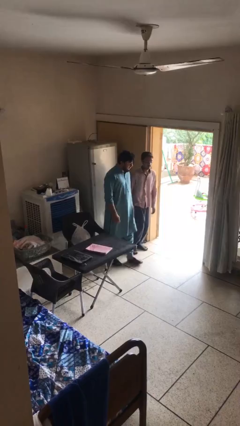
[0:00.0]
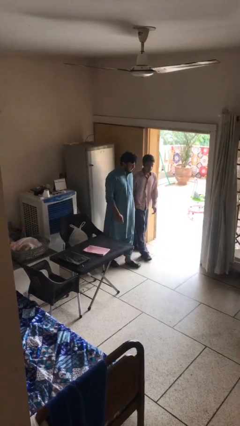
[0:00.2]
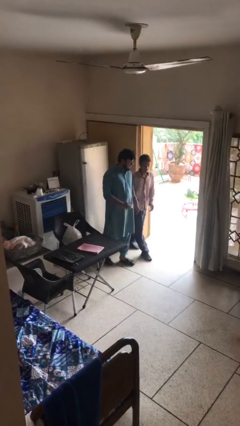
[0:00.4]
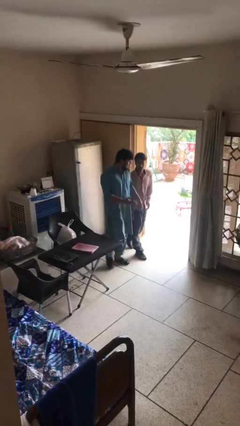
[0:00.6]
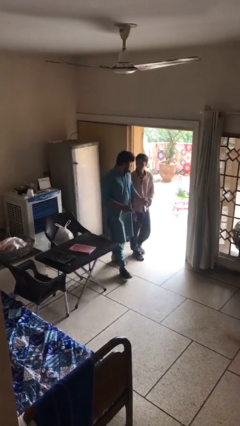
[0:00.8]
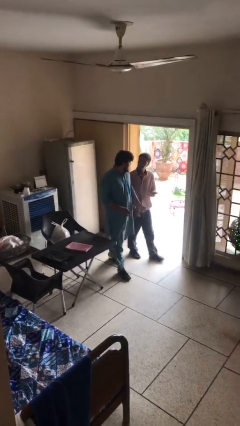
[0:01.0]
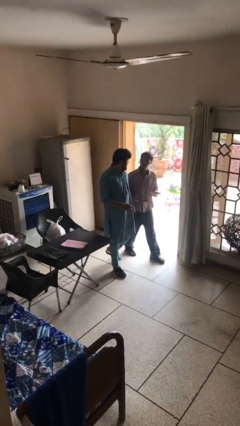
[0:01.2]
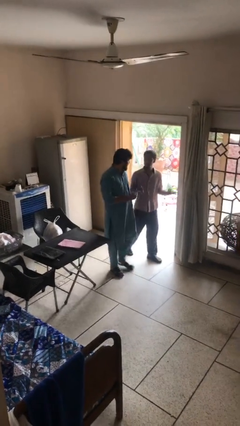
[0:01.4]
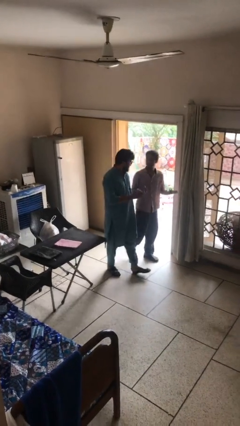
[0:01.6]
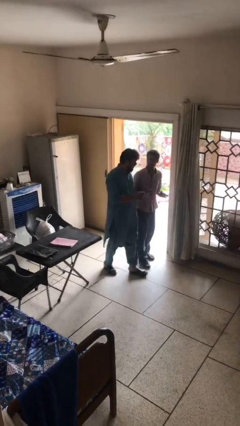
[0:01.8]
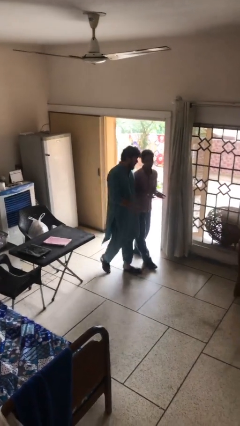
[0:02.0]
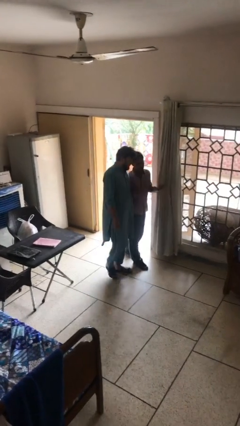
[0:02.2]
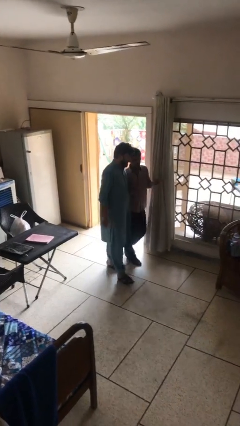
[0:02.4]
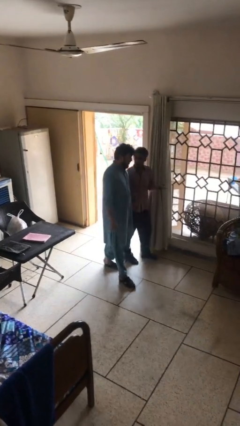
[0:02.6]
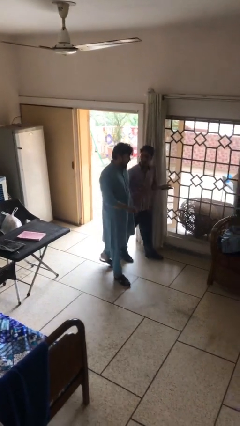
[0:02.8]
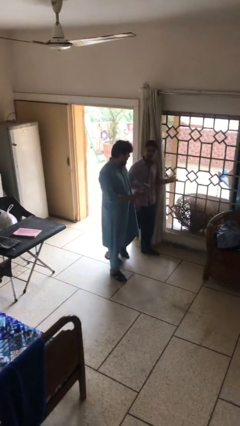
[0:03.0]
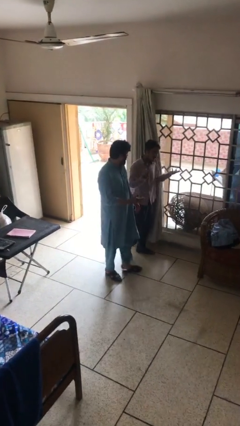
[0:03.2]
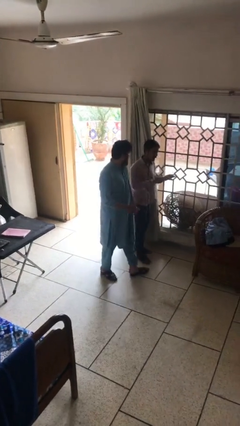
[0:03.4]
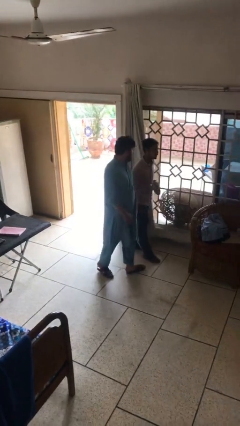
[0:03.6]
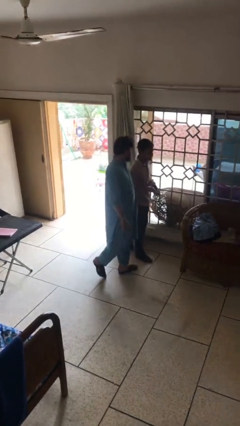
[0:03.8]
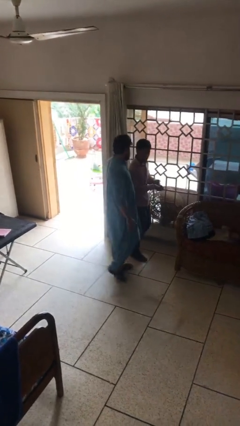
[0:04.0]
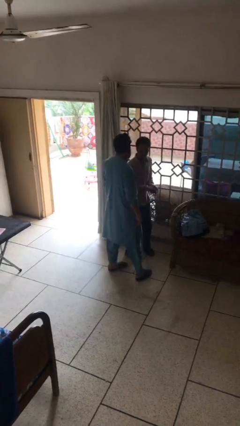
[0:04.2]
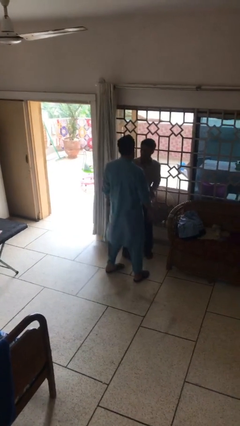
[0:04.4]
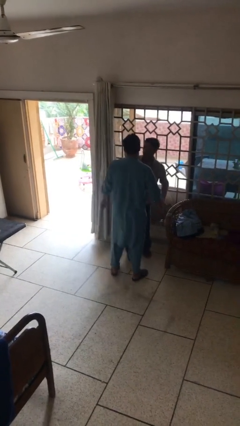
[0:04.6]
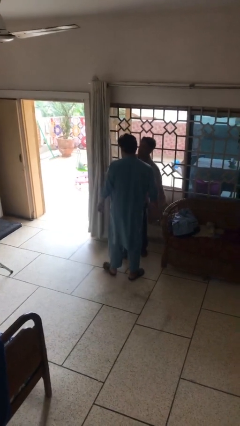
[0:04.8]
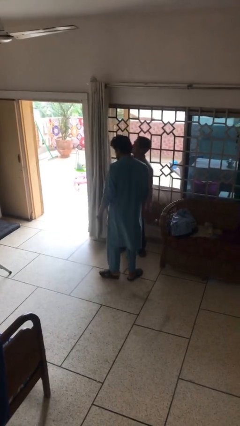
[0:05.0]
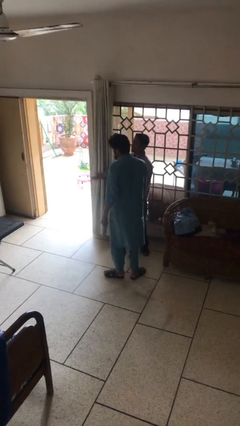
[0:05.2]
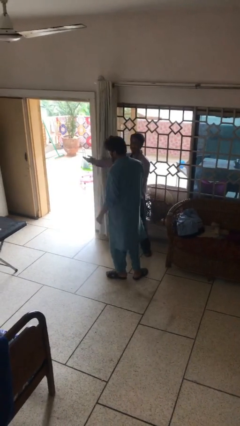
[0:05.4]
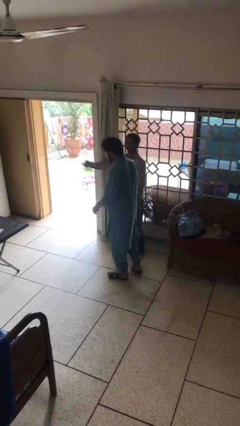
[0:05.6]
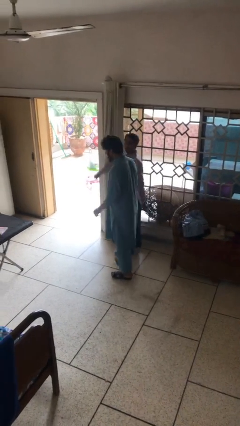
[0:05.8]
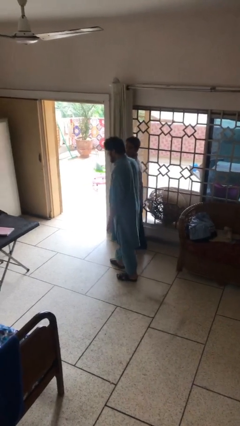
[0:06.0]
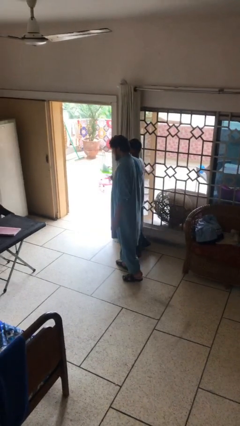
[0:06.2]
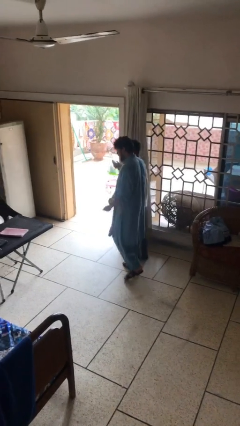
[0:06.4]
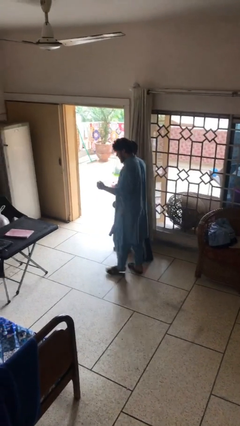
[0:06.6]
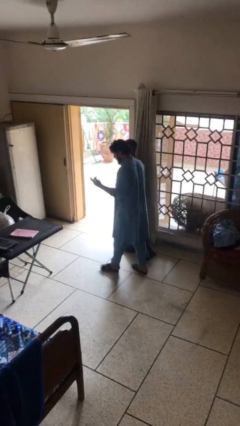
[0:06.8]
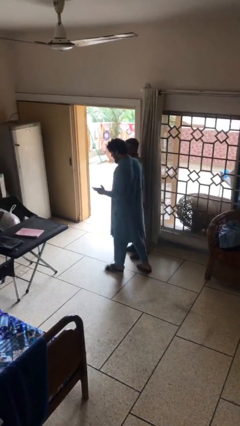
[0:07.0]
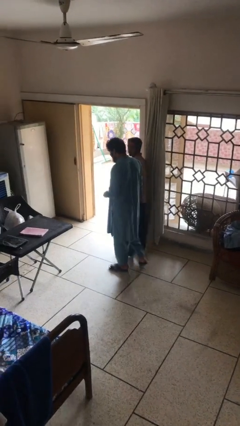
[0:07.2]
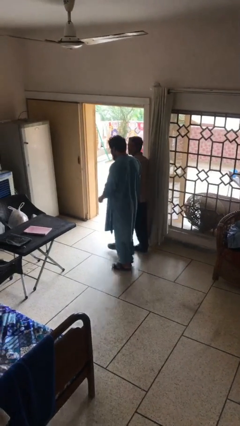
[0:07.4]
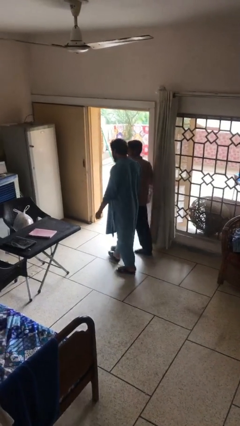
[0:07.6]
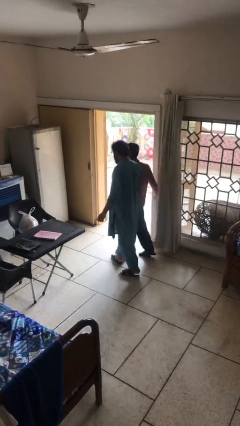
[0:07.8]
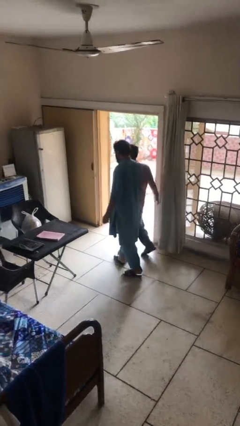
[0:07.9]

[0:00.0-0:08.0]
person talks to person

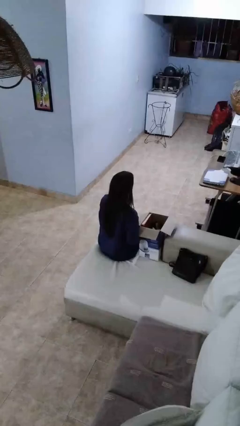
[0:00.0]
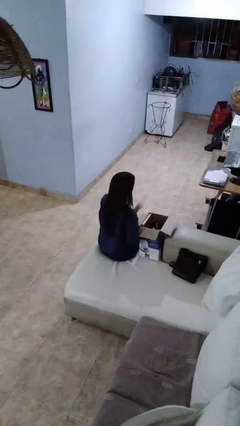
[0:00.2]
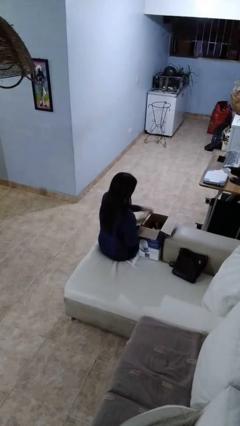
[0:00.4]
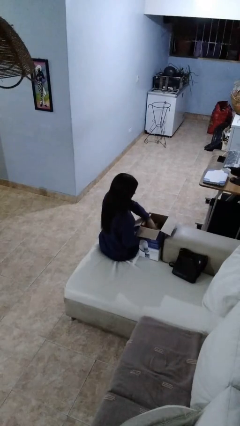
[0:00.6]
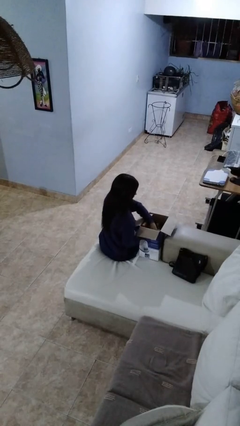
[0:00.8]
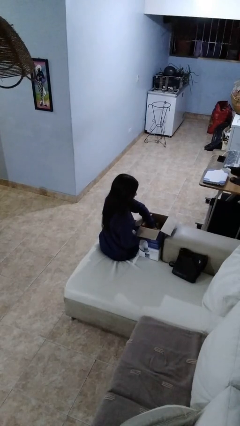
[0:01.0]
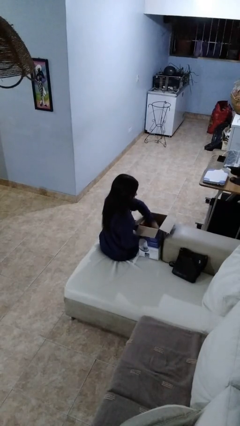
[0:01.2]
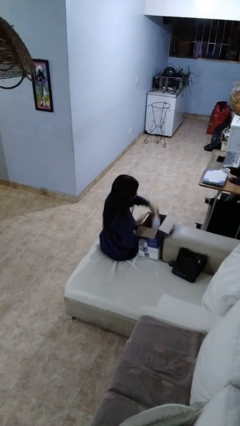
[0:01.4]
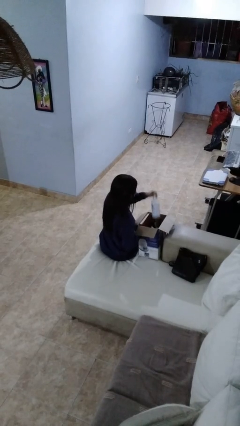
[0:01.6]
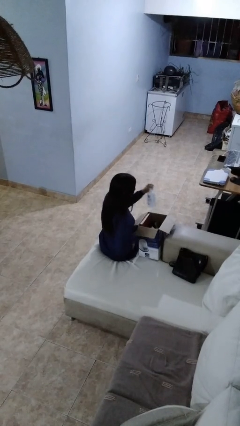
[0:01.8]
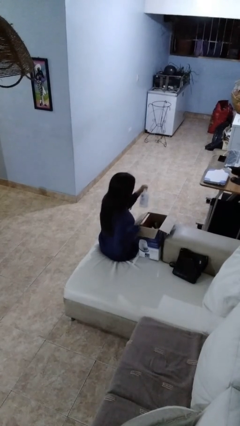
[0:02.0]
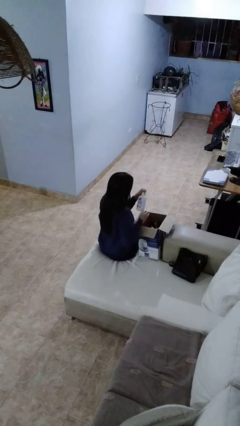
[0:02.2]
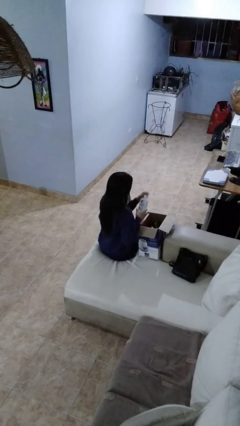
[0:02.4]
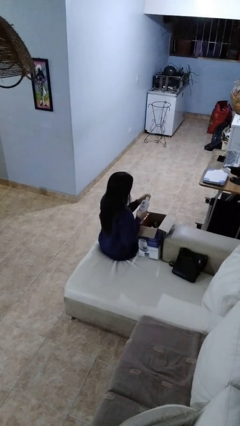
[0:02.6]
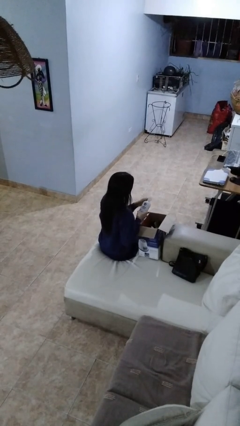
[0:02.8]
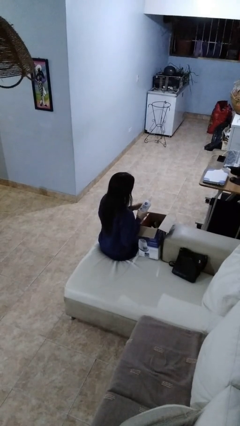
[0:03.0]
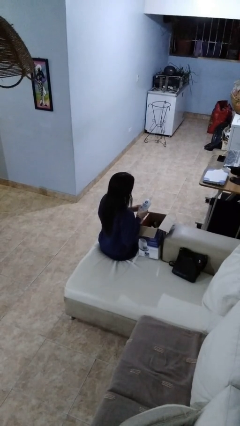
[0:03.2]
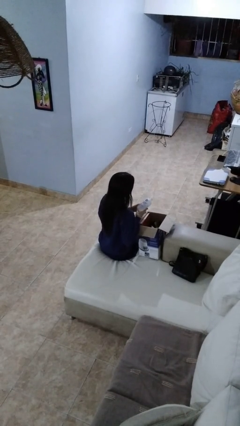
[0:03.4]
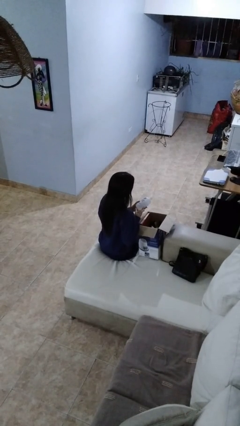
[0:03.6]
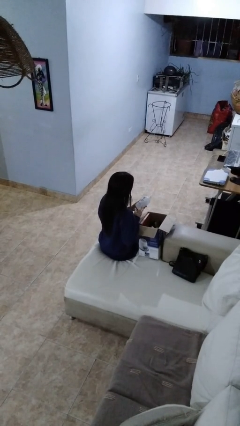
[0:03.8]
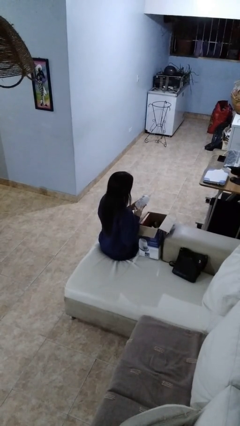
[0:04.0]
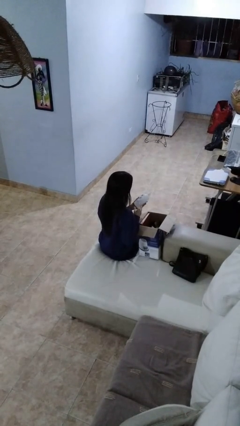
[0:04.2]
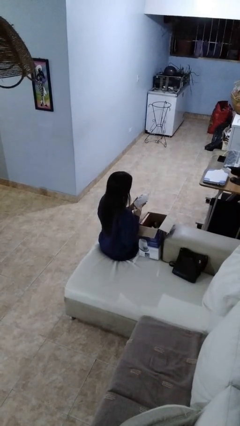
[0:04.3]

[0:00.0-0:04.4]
person takes object from box

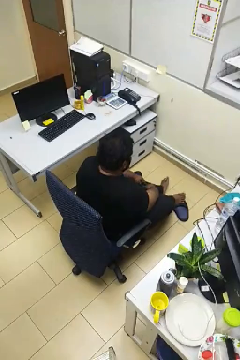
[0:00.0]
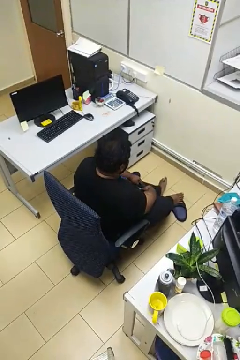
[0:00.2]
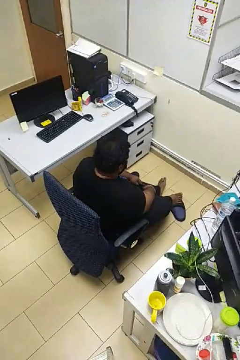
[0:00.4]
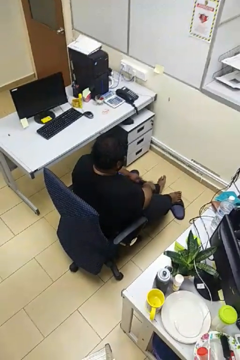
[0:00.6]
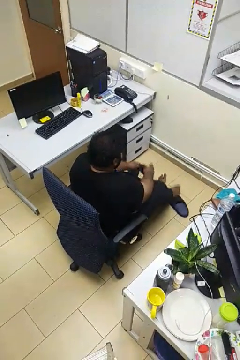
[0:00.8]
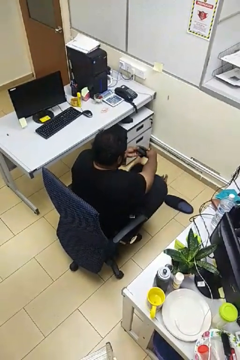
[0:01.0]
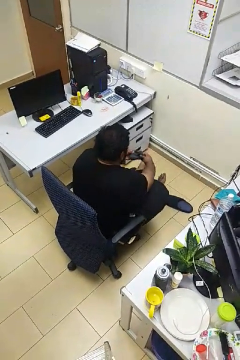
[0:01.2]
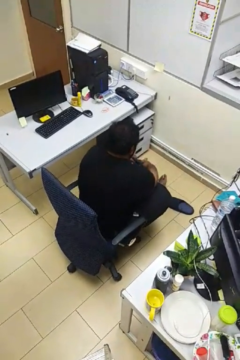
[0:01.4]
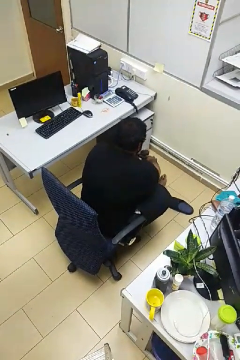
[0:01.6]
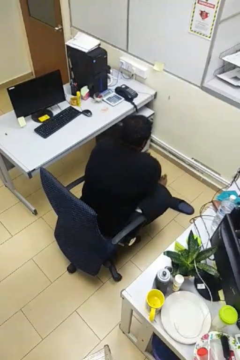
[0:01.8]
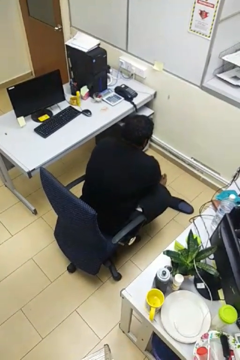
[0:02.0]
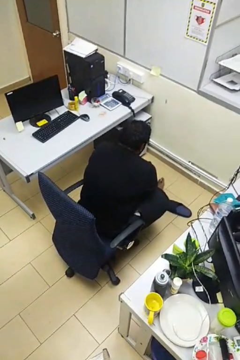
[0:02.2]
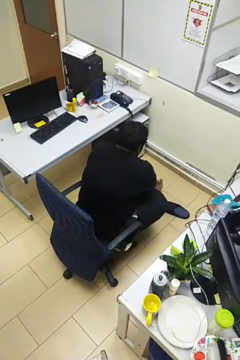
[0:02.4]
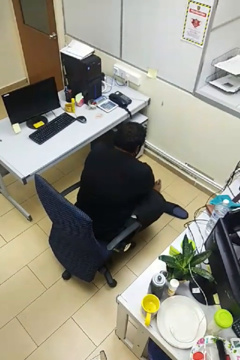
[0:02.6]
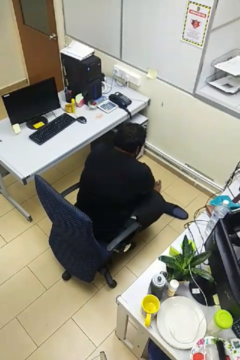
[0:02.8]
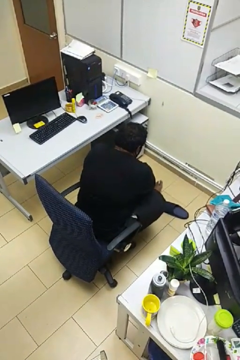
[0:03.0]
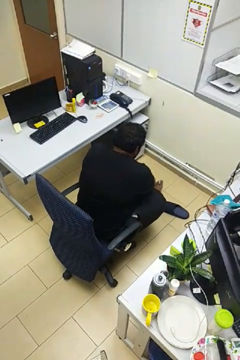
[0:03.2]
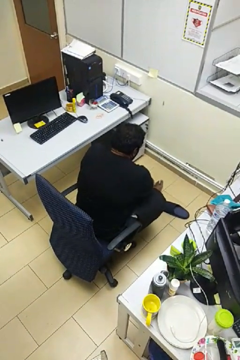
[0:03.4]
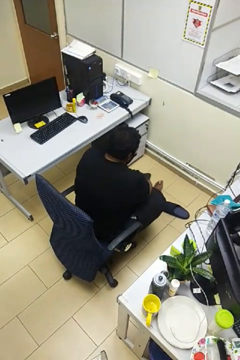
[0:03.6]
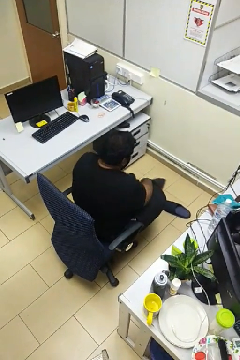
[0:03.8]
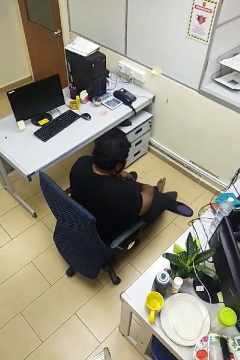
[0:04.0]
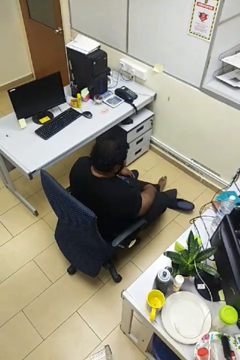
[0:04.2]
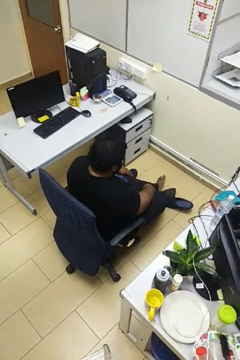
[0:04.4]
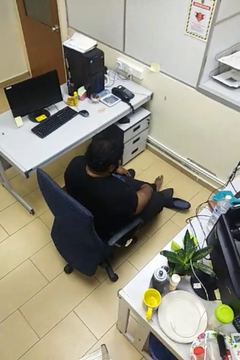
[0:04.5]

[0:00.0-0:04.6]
person puts on socks

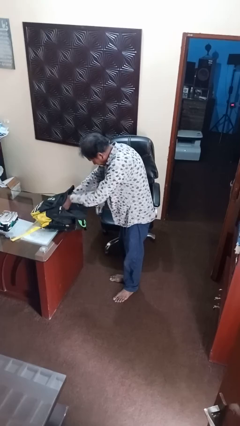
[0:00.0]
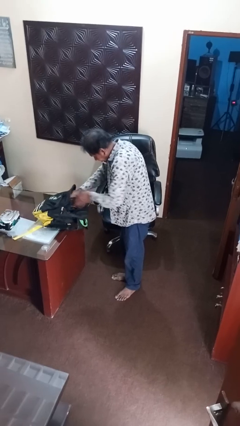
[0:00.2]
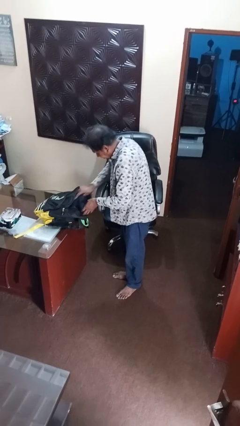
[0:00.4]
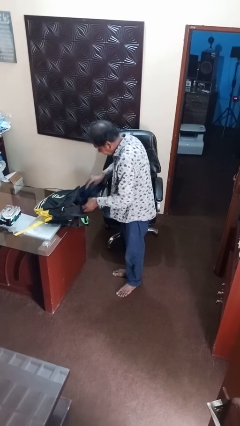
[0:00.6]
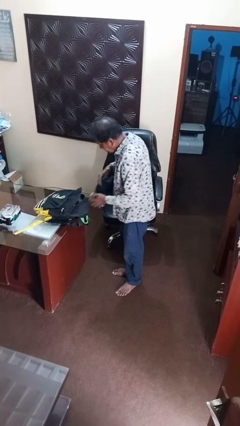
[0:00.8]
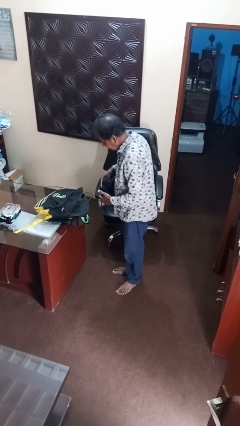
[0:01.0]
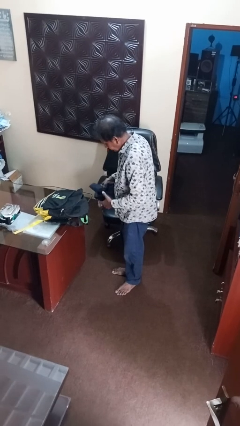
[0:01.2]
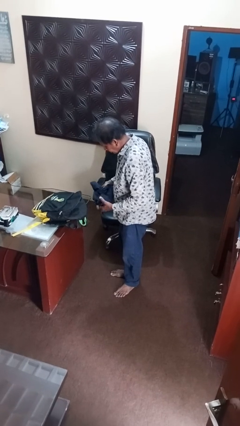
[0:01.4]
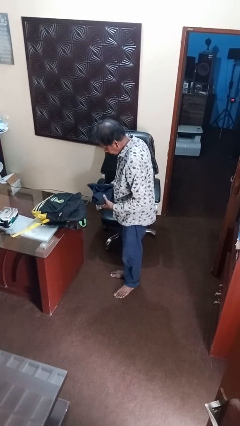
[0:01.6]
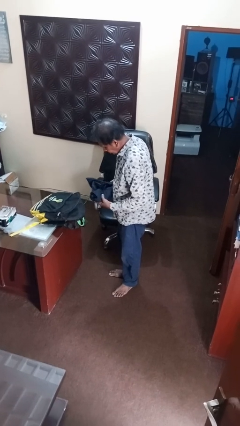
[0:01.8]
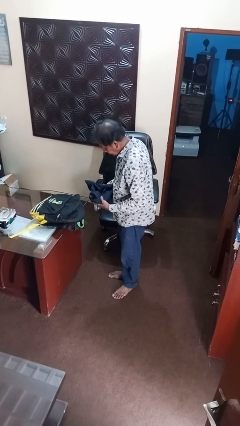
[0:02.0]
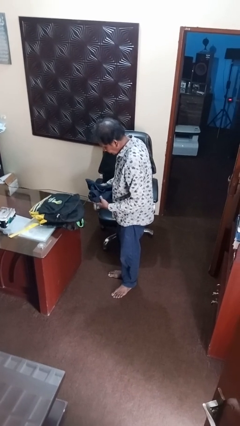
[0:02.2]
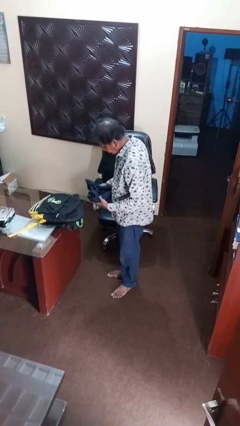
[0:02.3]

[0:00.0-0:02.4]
person takes object from backpack
